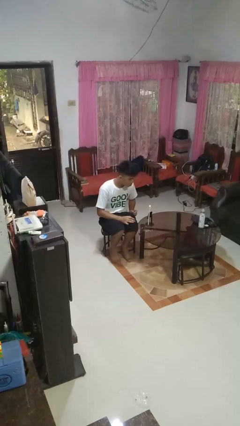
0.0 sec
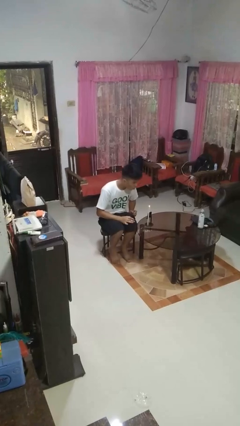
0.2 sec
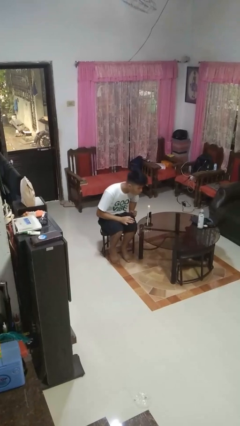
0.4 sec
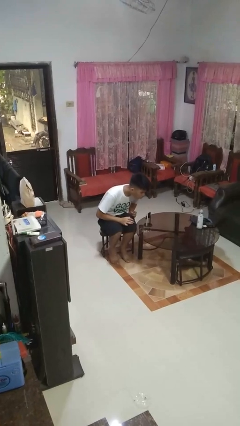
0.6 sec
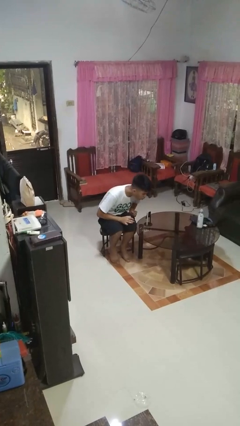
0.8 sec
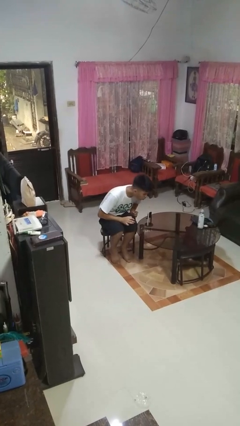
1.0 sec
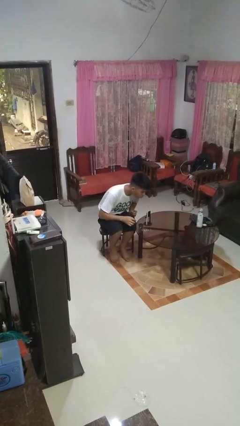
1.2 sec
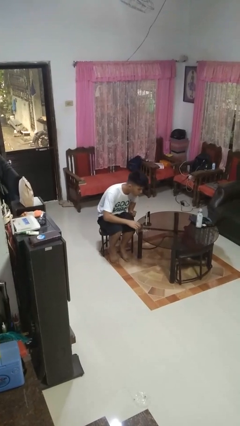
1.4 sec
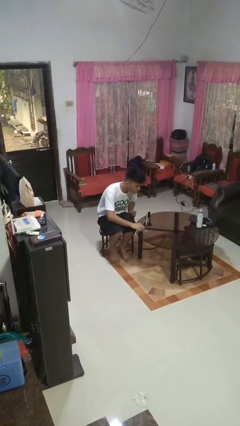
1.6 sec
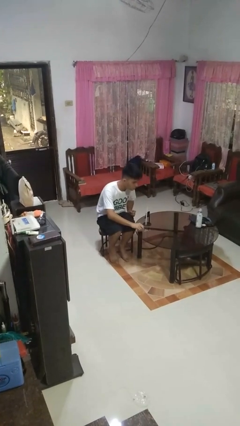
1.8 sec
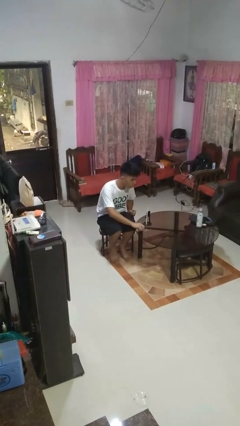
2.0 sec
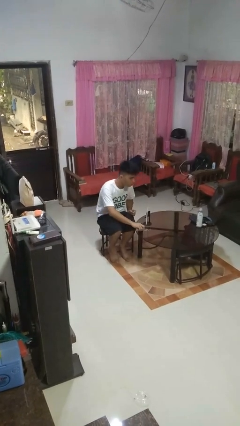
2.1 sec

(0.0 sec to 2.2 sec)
person extinguishes candle

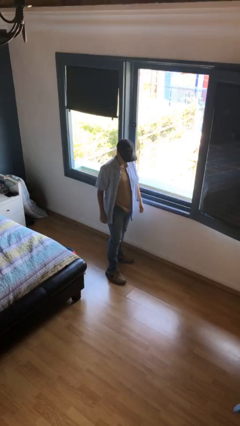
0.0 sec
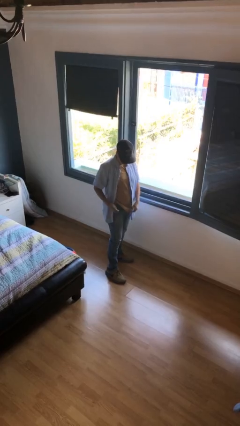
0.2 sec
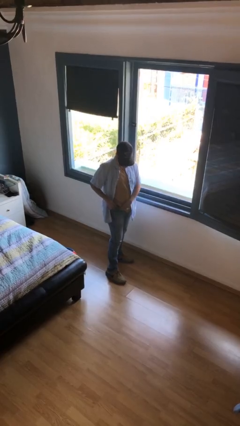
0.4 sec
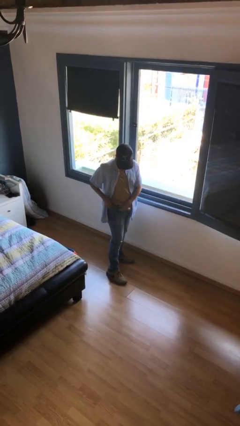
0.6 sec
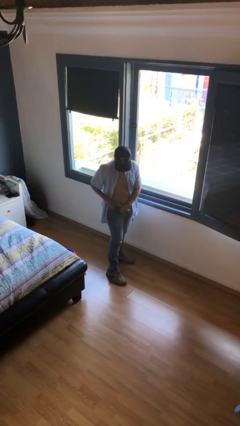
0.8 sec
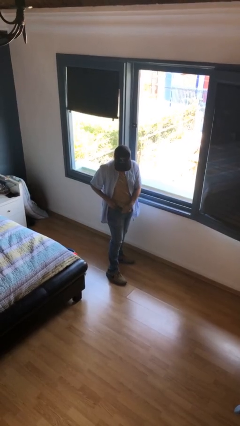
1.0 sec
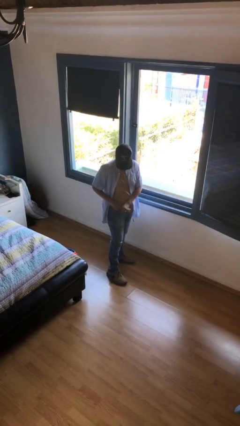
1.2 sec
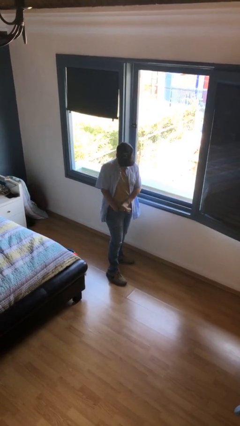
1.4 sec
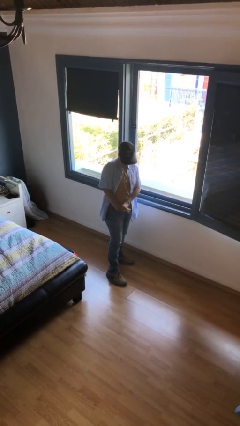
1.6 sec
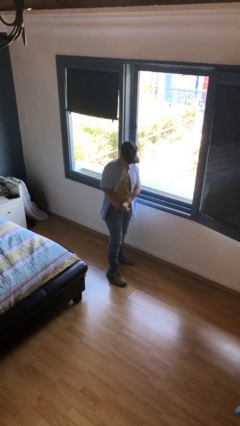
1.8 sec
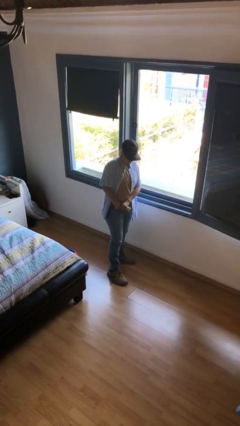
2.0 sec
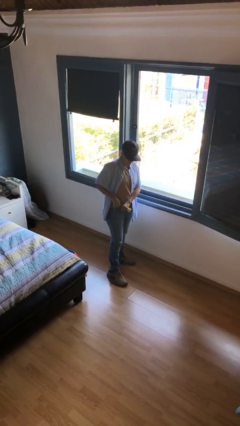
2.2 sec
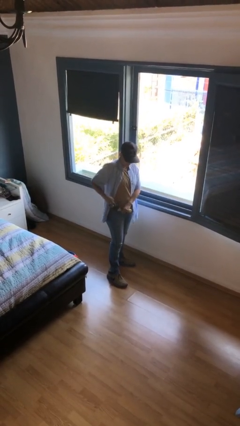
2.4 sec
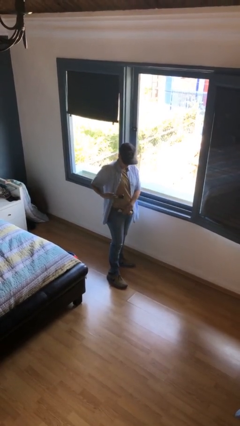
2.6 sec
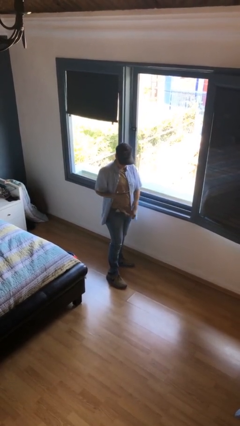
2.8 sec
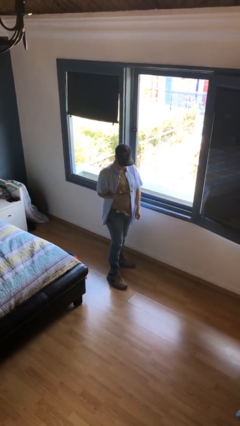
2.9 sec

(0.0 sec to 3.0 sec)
person takes phone from pocket

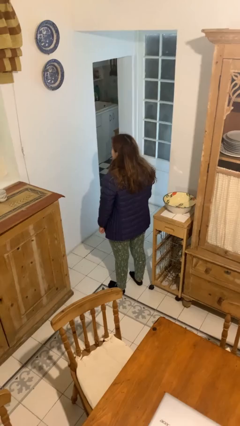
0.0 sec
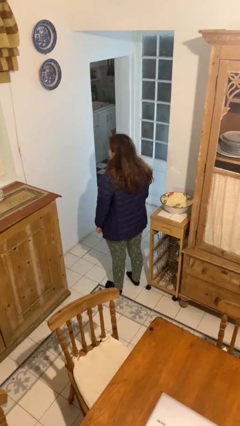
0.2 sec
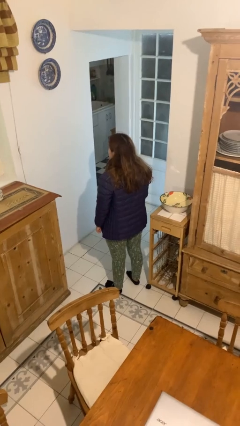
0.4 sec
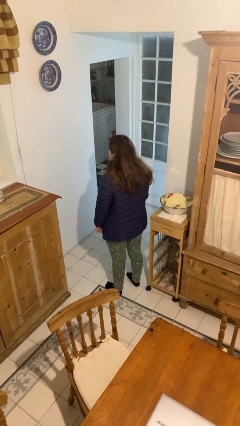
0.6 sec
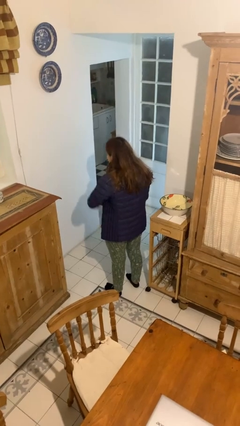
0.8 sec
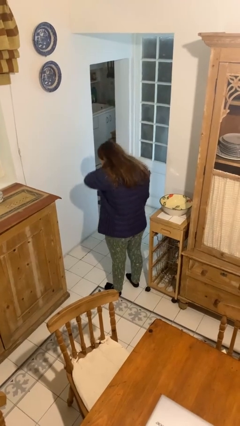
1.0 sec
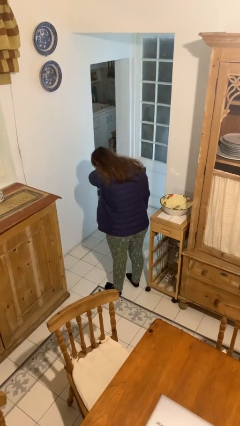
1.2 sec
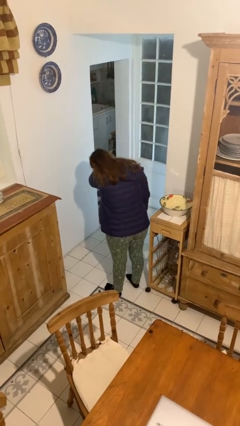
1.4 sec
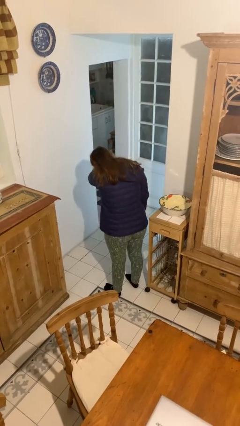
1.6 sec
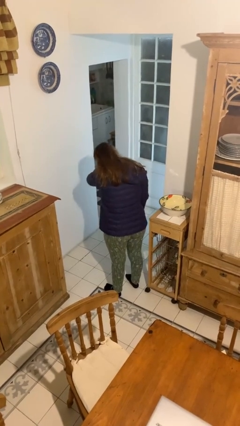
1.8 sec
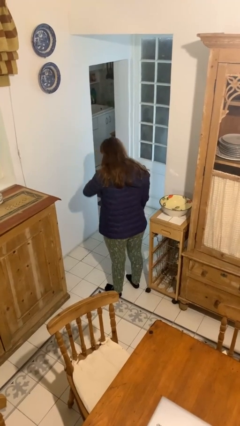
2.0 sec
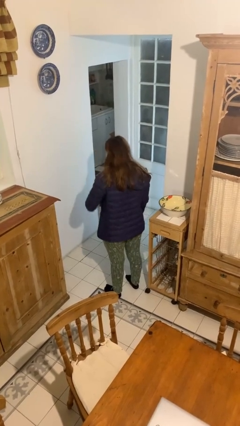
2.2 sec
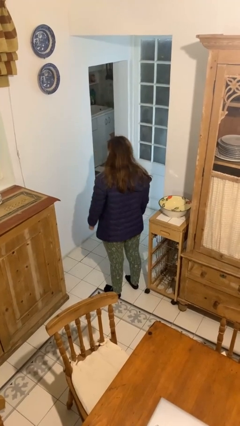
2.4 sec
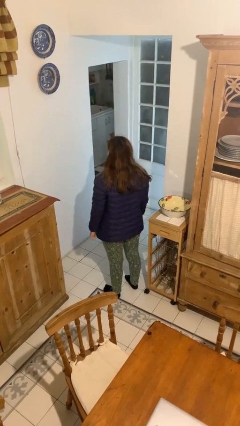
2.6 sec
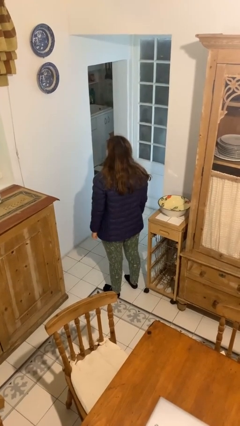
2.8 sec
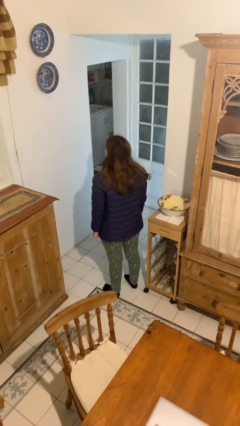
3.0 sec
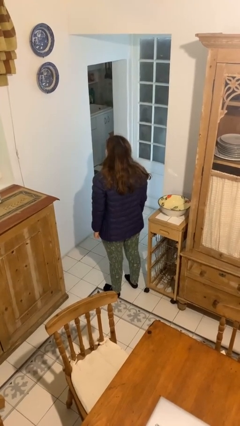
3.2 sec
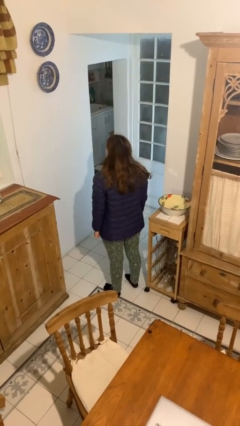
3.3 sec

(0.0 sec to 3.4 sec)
person sneezes into arm

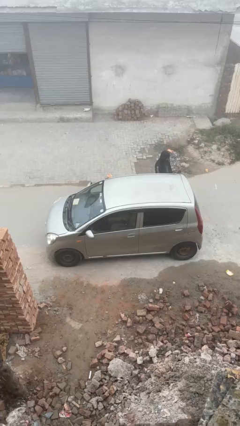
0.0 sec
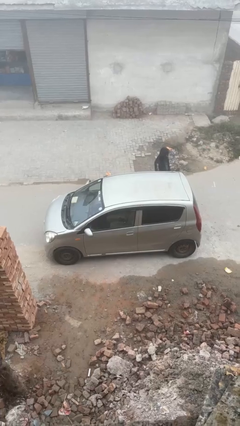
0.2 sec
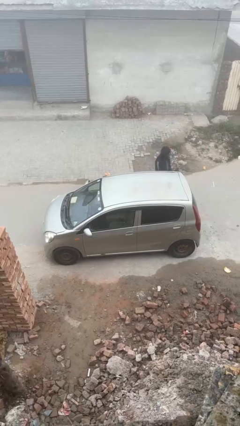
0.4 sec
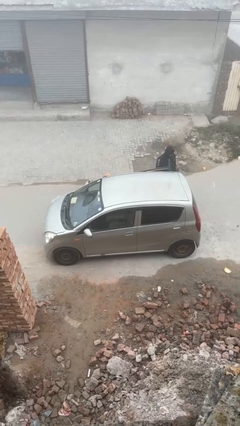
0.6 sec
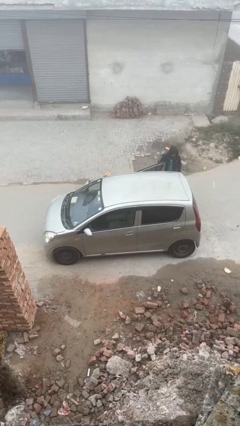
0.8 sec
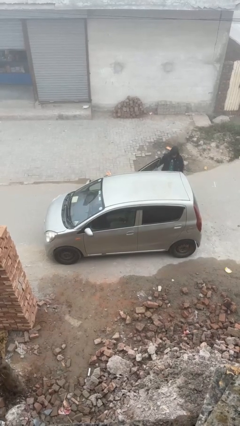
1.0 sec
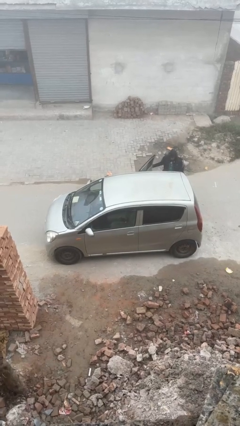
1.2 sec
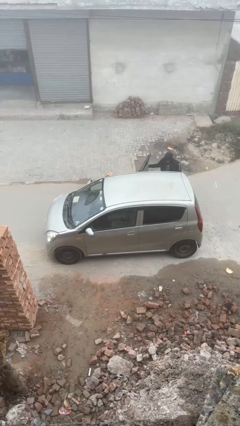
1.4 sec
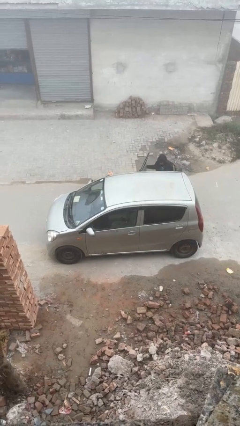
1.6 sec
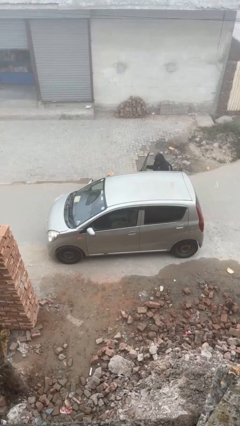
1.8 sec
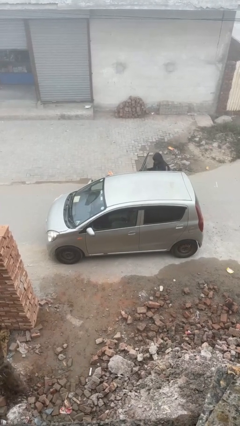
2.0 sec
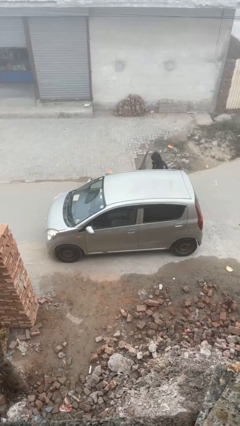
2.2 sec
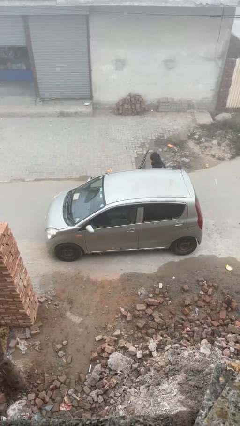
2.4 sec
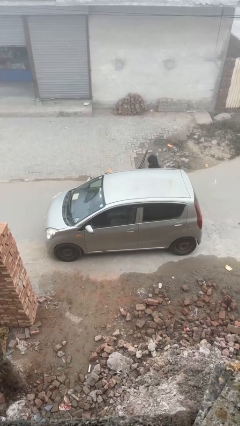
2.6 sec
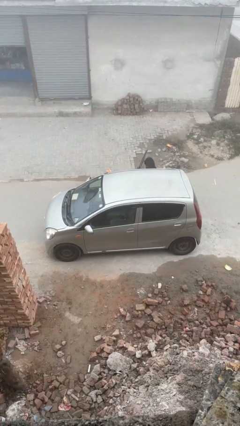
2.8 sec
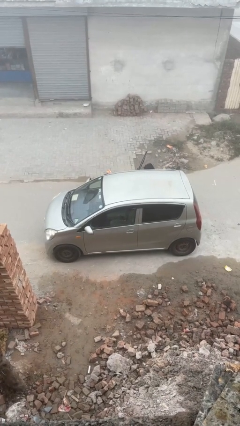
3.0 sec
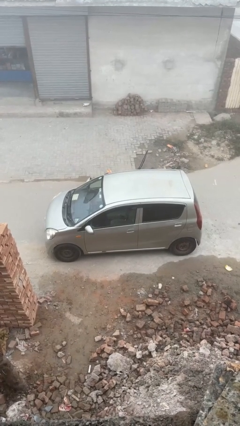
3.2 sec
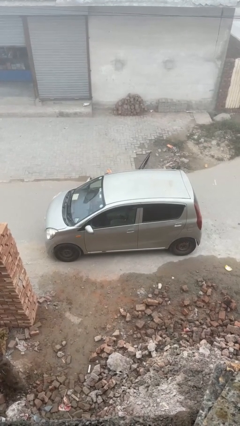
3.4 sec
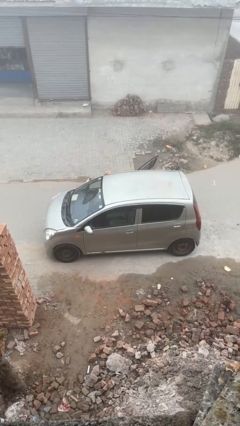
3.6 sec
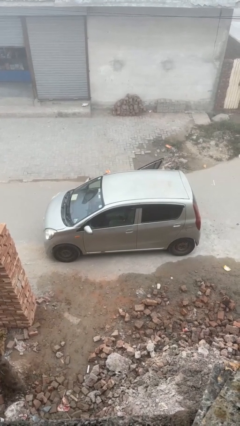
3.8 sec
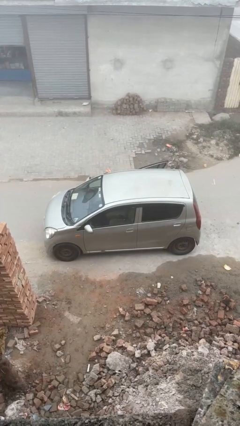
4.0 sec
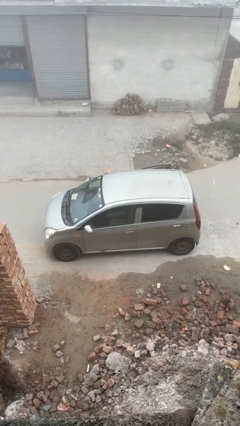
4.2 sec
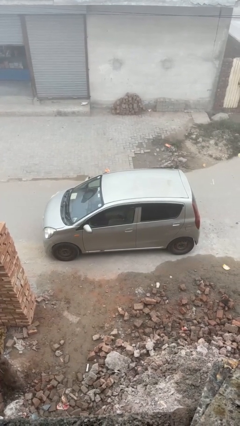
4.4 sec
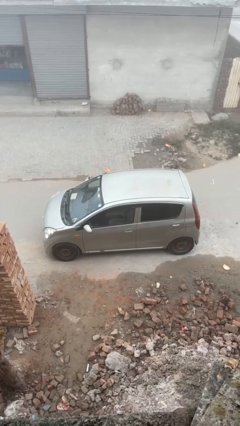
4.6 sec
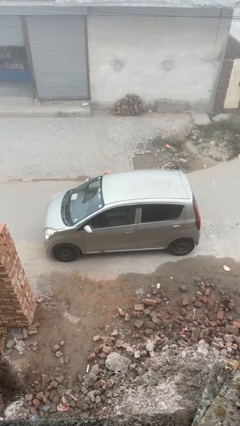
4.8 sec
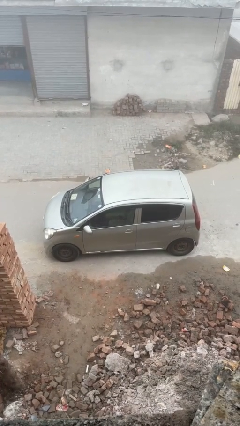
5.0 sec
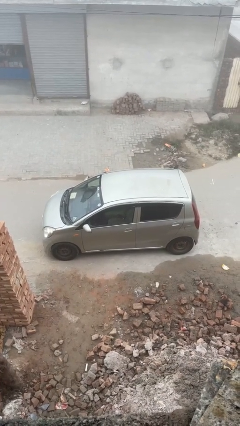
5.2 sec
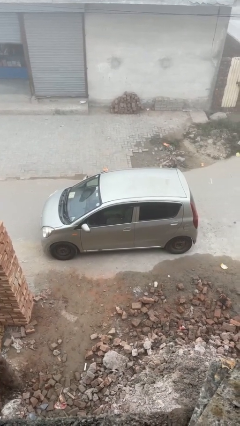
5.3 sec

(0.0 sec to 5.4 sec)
car picks up person

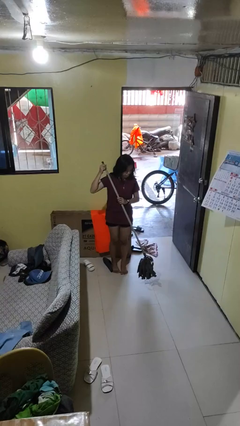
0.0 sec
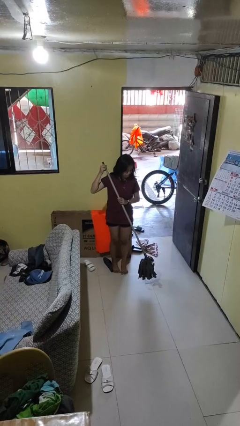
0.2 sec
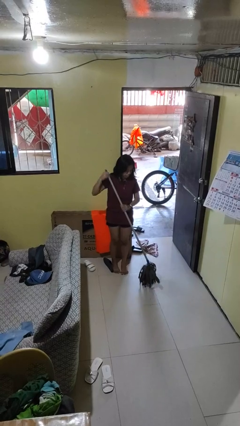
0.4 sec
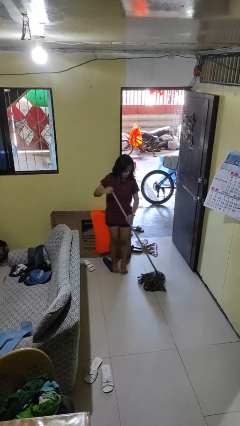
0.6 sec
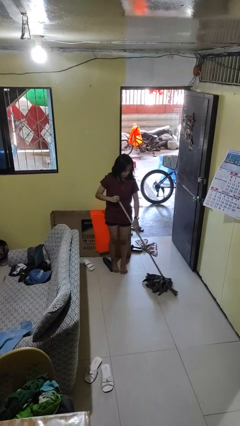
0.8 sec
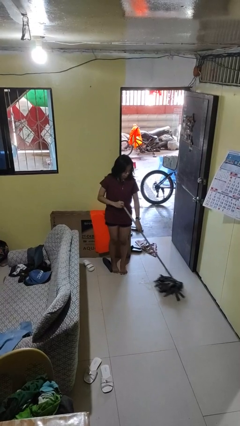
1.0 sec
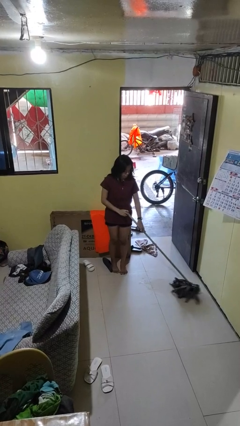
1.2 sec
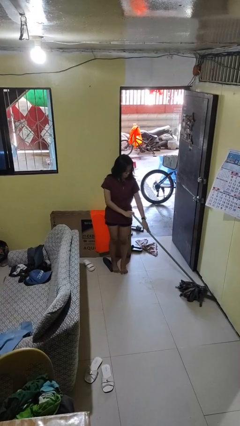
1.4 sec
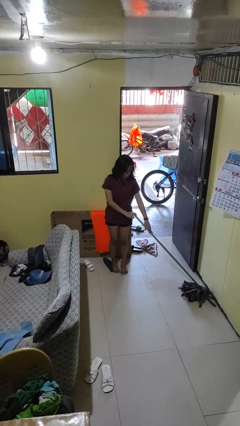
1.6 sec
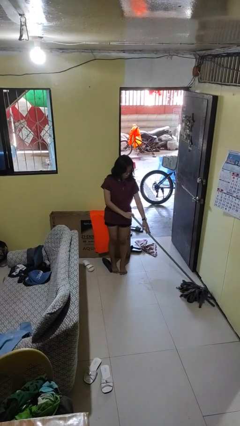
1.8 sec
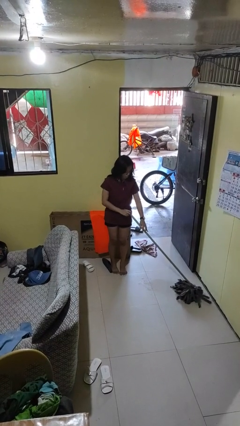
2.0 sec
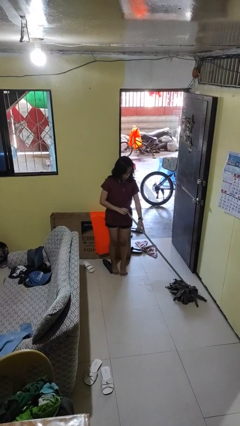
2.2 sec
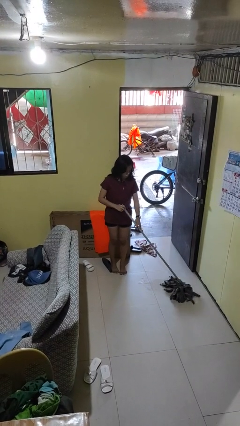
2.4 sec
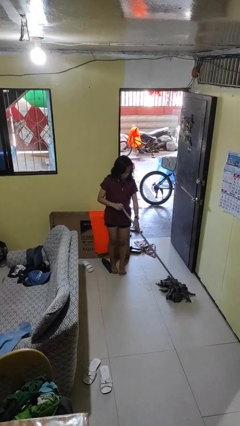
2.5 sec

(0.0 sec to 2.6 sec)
person mops

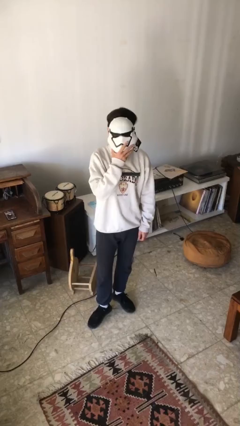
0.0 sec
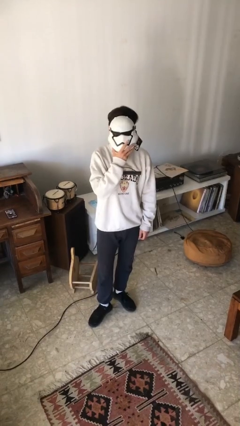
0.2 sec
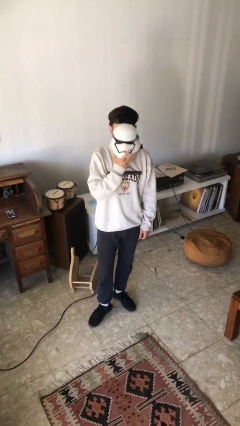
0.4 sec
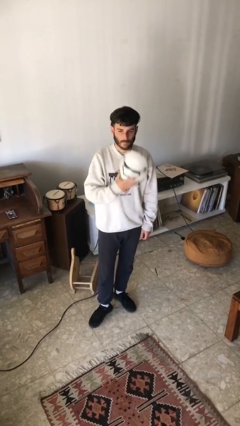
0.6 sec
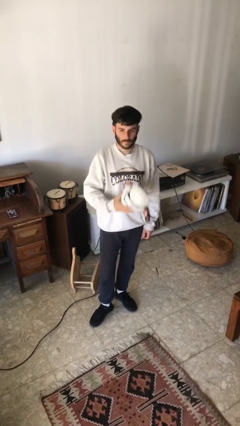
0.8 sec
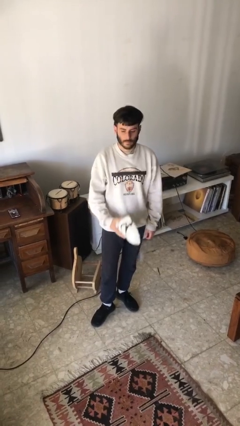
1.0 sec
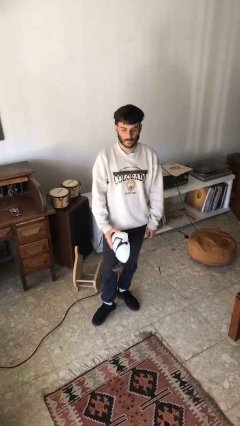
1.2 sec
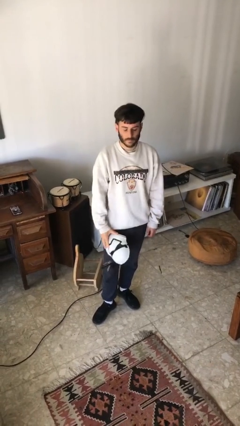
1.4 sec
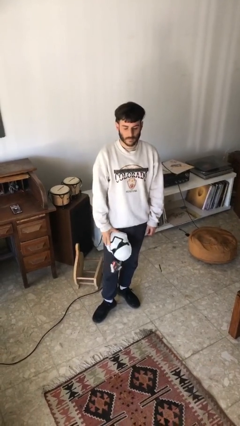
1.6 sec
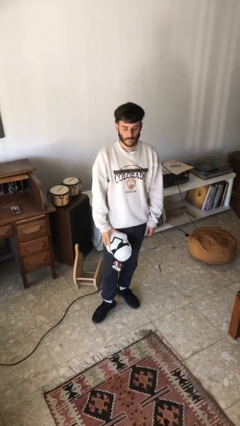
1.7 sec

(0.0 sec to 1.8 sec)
person takes off facemask
